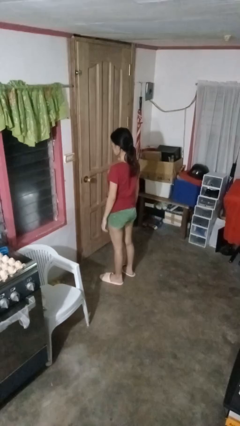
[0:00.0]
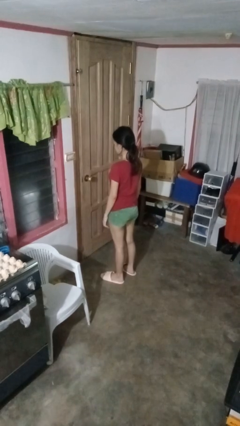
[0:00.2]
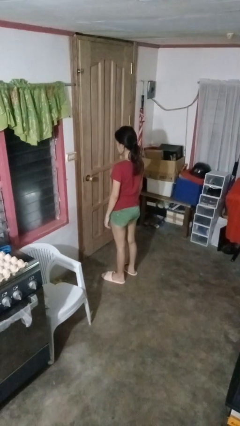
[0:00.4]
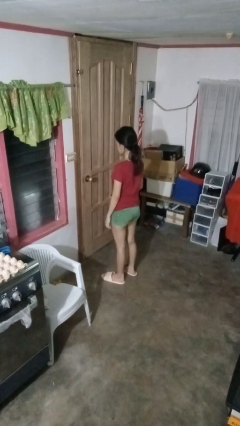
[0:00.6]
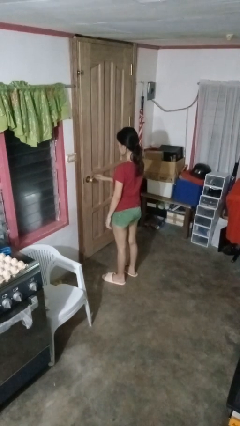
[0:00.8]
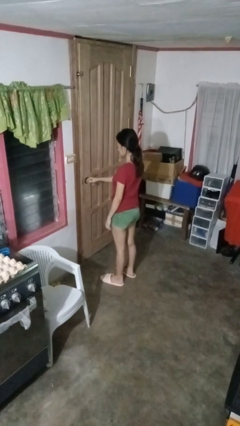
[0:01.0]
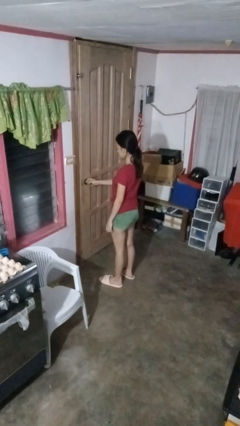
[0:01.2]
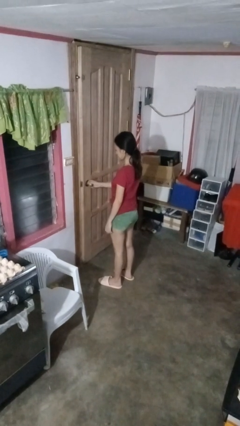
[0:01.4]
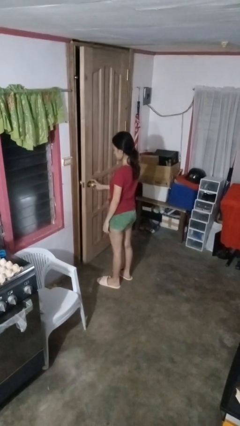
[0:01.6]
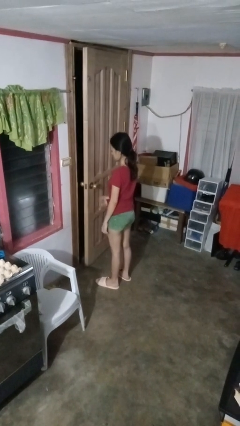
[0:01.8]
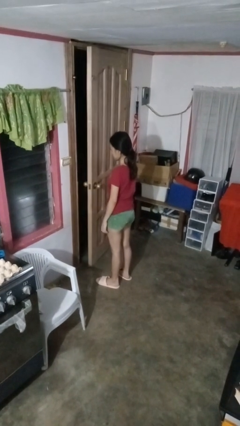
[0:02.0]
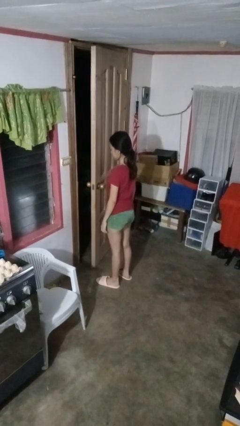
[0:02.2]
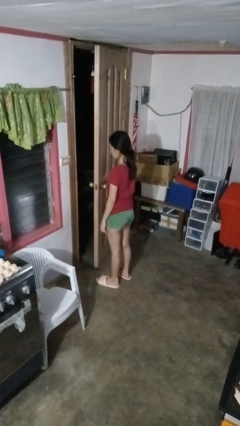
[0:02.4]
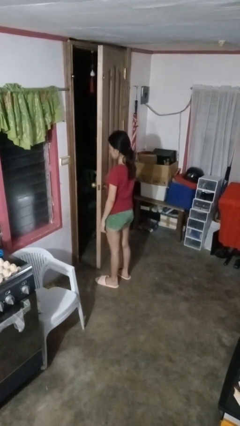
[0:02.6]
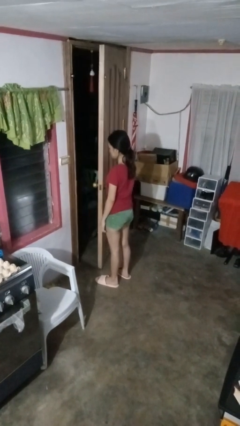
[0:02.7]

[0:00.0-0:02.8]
person opens facility door

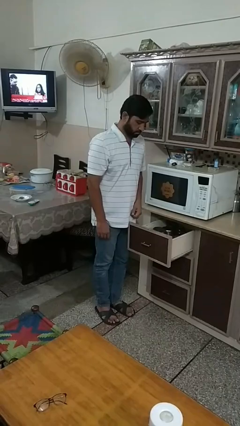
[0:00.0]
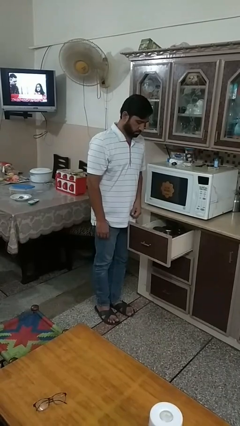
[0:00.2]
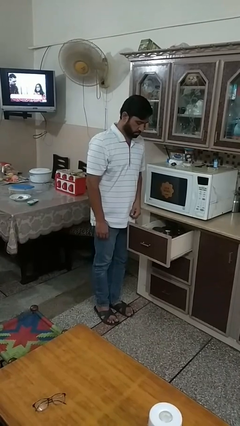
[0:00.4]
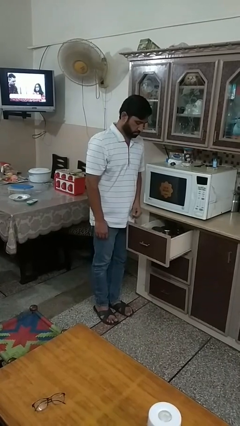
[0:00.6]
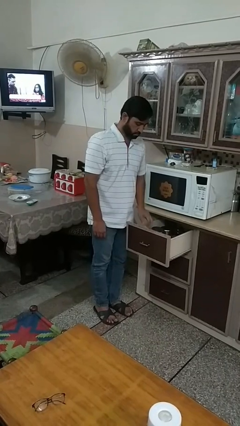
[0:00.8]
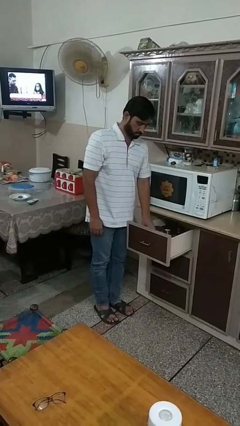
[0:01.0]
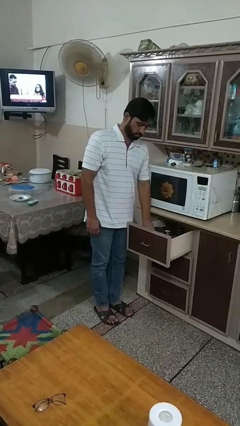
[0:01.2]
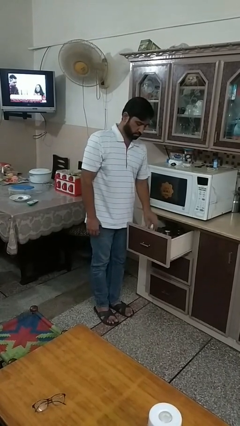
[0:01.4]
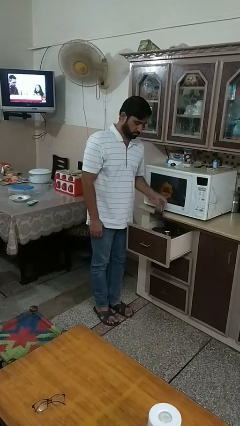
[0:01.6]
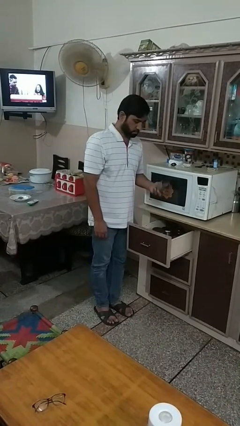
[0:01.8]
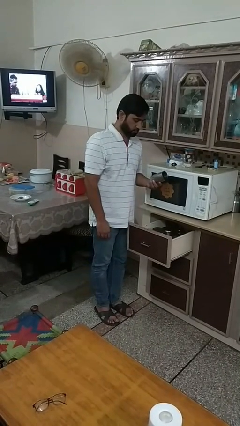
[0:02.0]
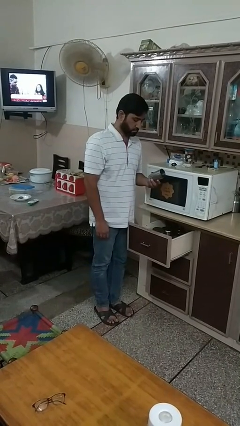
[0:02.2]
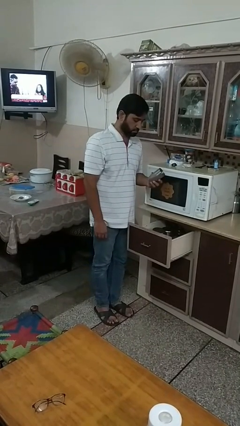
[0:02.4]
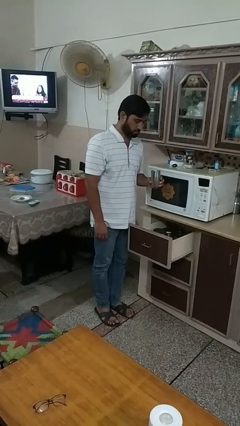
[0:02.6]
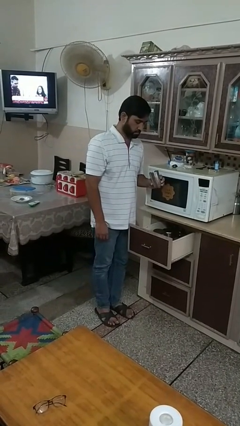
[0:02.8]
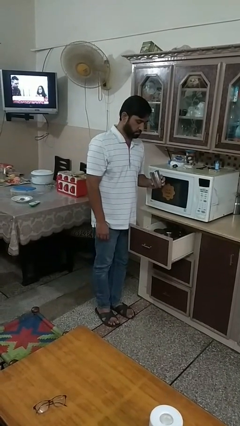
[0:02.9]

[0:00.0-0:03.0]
person takes object from kitchen drawer

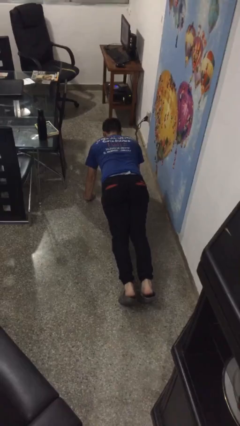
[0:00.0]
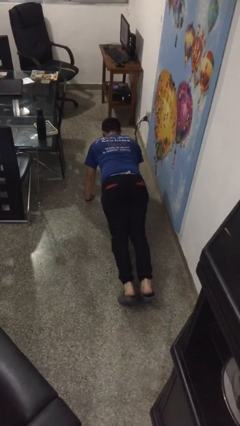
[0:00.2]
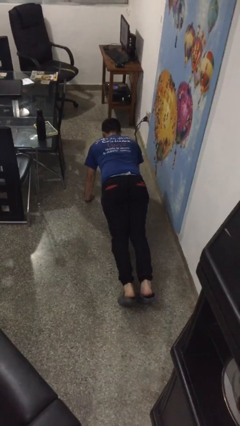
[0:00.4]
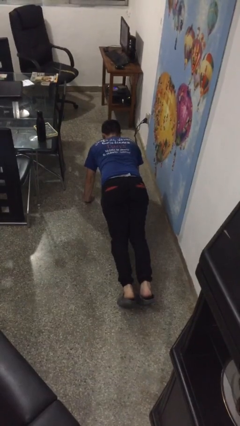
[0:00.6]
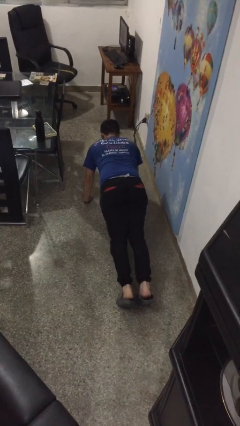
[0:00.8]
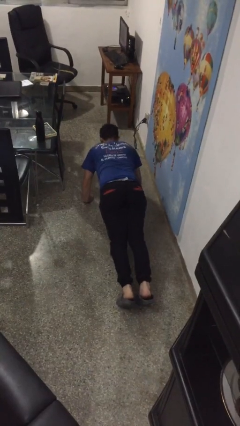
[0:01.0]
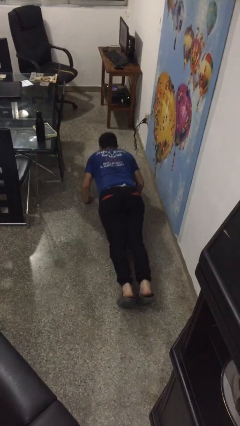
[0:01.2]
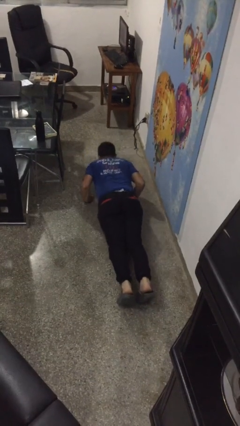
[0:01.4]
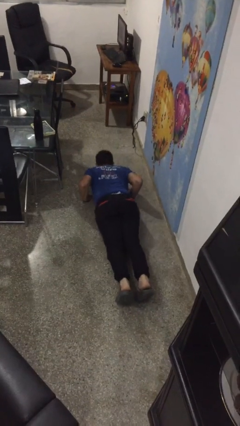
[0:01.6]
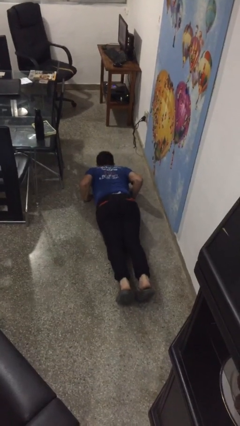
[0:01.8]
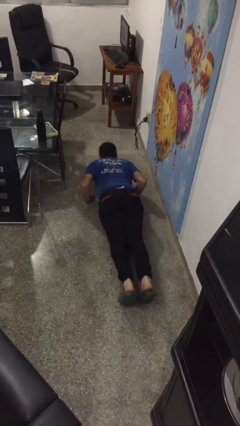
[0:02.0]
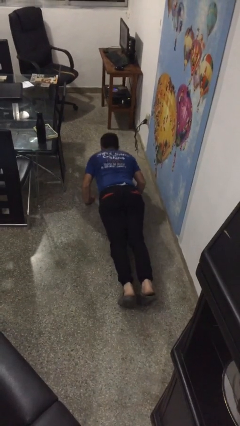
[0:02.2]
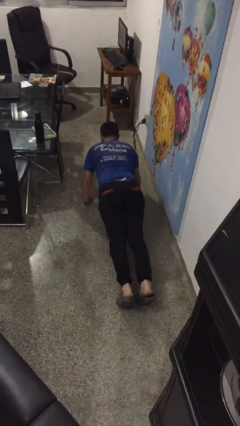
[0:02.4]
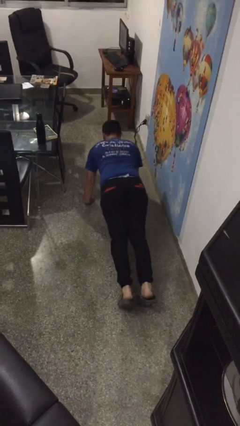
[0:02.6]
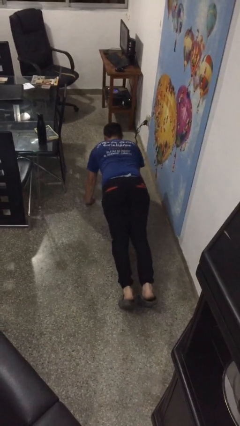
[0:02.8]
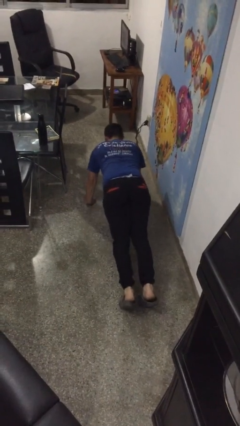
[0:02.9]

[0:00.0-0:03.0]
person exercises with pushup

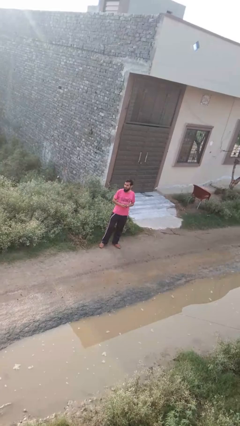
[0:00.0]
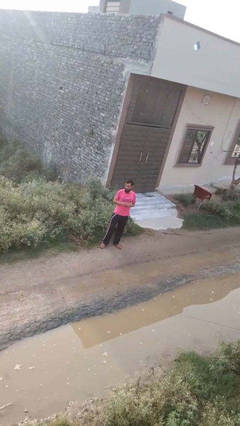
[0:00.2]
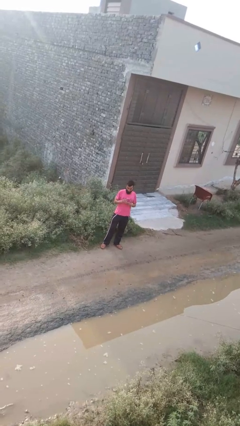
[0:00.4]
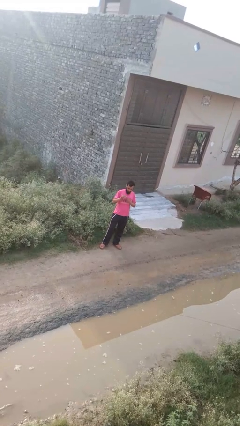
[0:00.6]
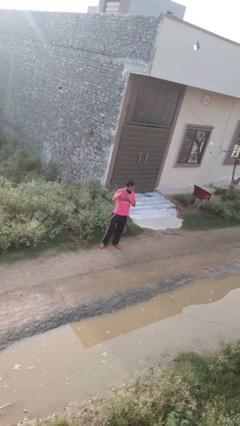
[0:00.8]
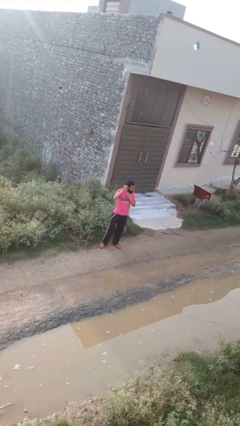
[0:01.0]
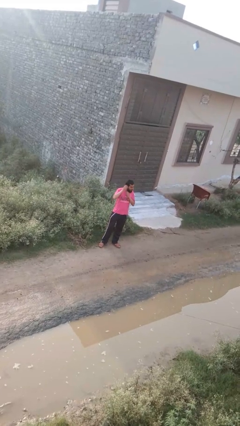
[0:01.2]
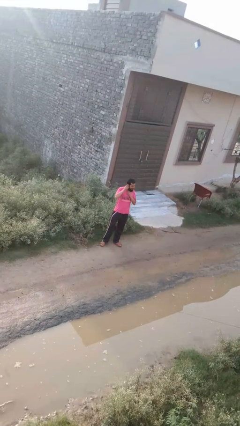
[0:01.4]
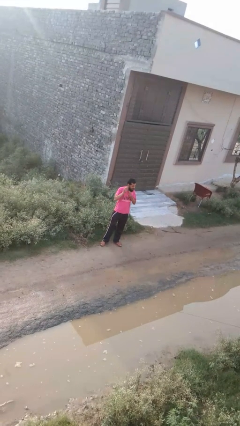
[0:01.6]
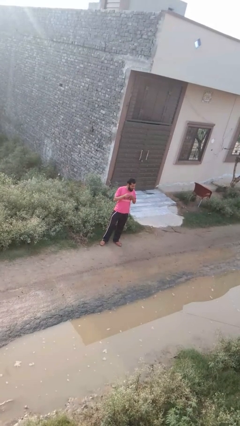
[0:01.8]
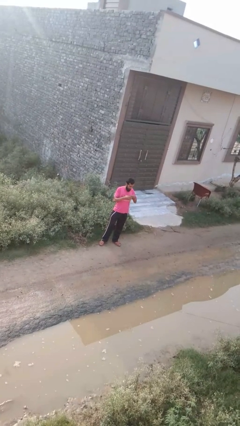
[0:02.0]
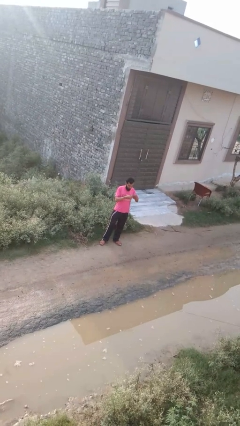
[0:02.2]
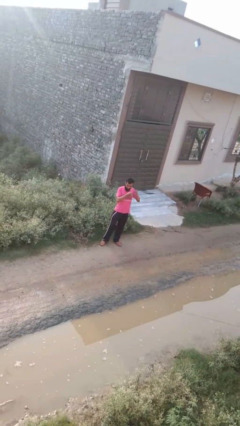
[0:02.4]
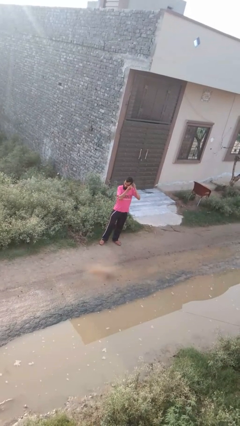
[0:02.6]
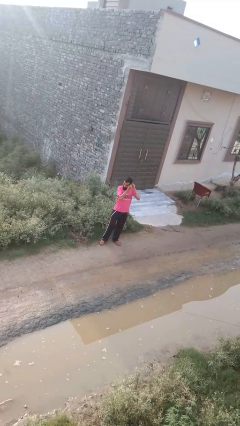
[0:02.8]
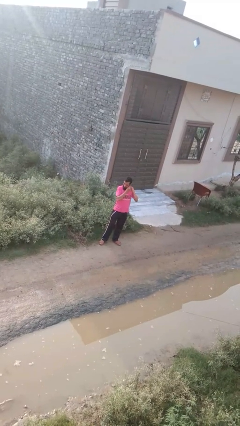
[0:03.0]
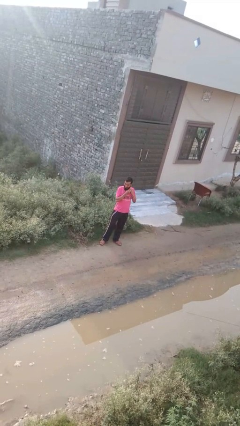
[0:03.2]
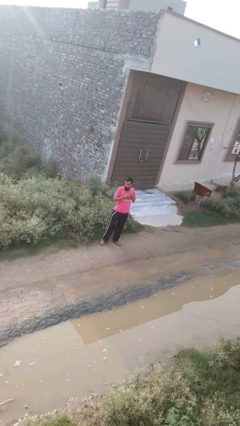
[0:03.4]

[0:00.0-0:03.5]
person puts on earrings

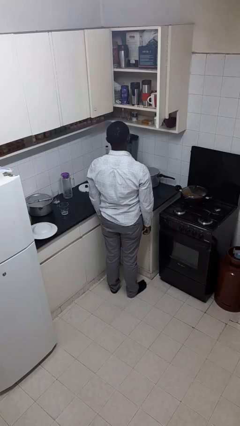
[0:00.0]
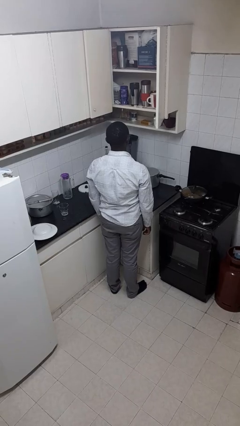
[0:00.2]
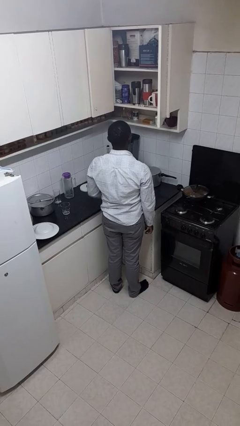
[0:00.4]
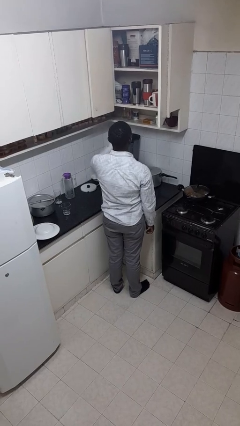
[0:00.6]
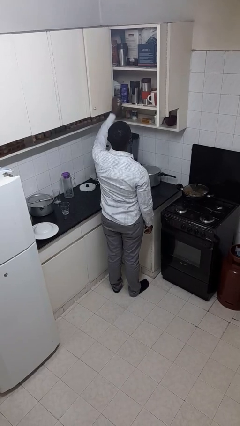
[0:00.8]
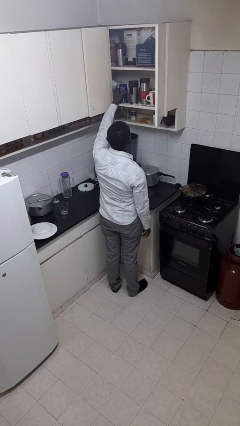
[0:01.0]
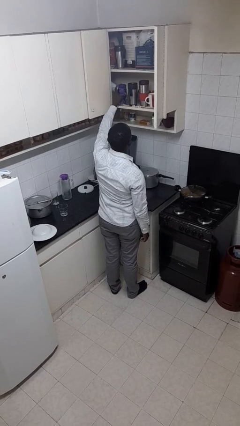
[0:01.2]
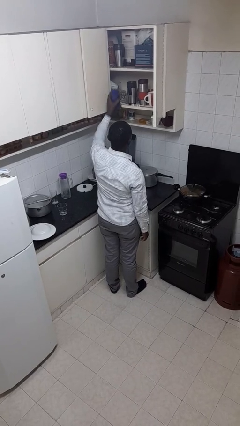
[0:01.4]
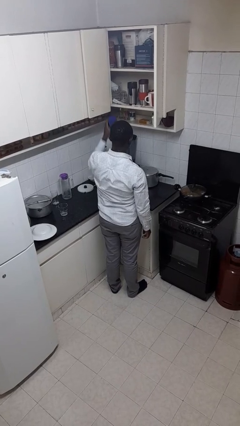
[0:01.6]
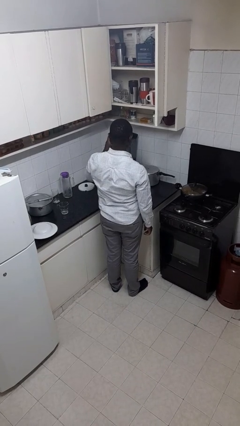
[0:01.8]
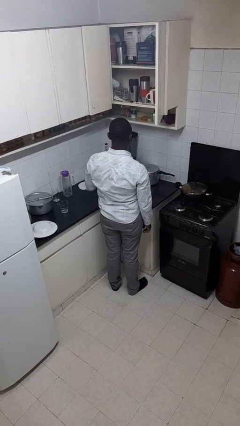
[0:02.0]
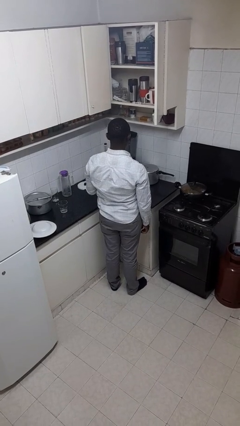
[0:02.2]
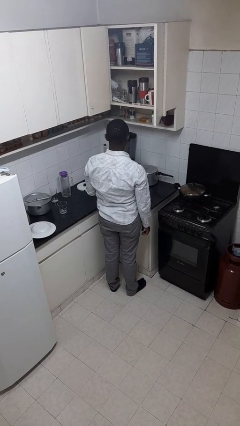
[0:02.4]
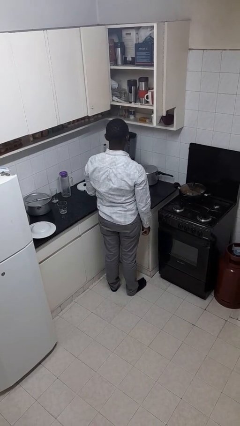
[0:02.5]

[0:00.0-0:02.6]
person takes object from cabinet

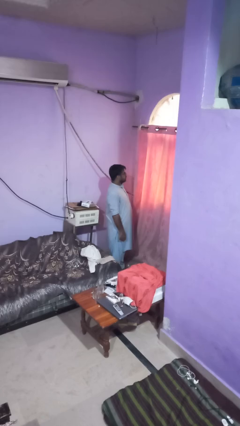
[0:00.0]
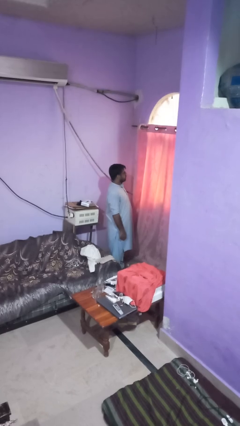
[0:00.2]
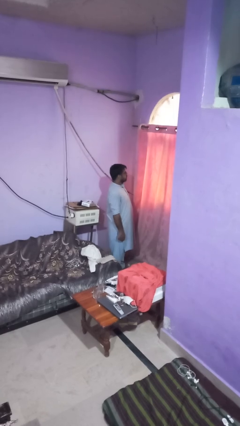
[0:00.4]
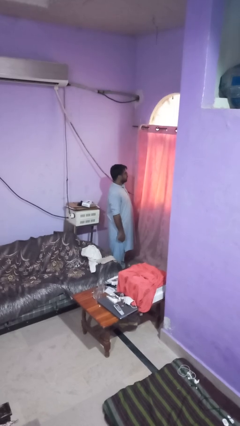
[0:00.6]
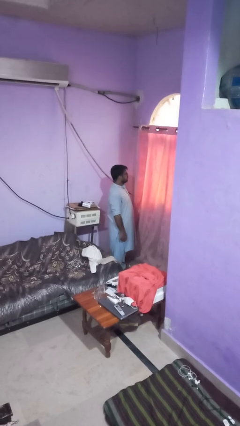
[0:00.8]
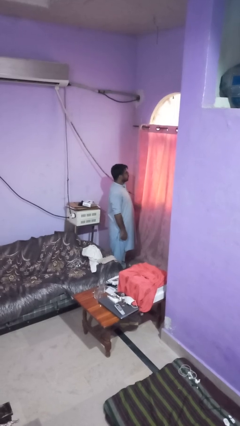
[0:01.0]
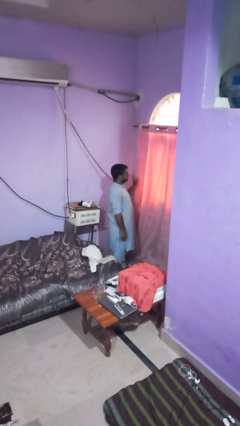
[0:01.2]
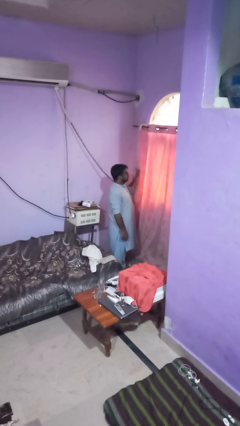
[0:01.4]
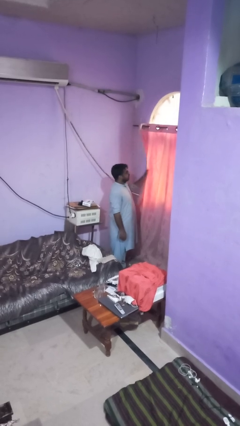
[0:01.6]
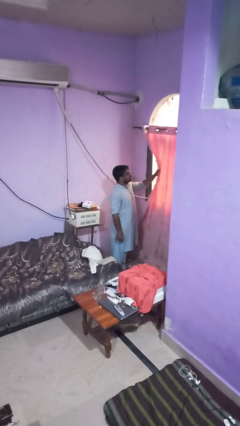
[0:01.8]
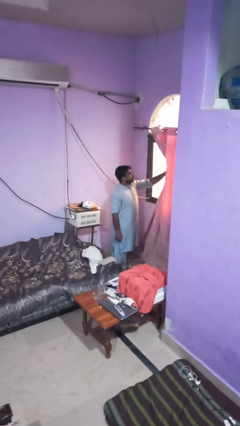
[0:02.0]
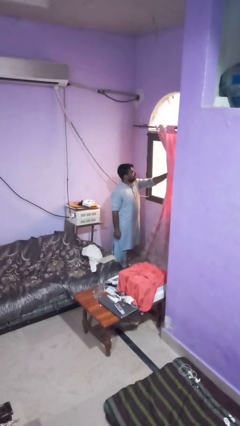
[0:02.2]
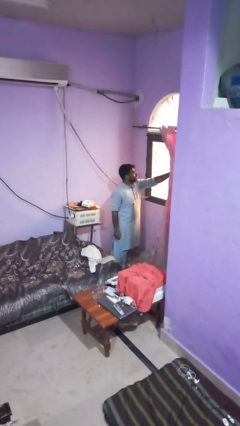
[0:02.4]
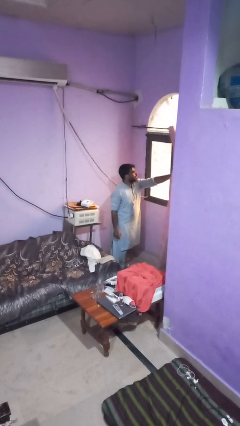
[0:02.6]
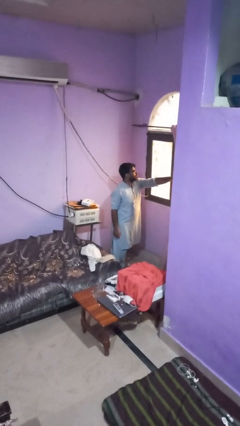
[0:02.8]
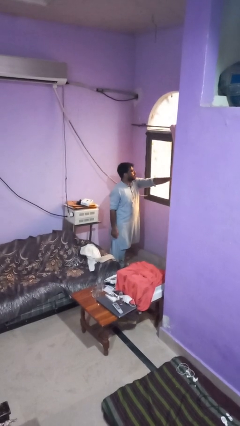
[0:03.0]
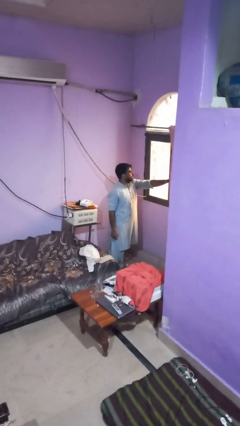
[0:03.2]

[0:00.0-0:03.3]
person opens curtains
